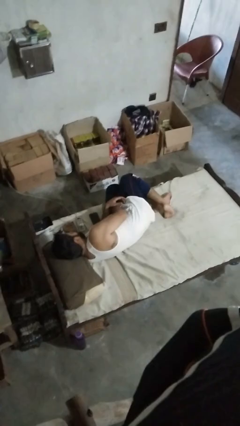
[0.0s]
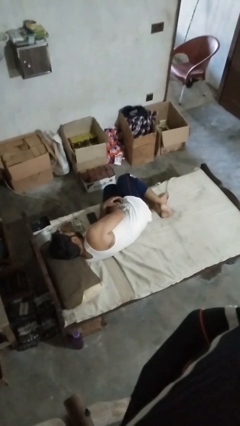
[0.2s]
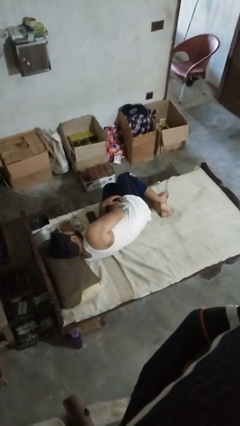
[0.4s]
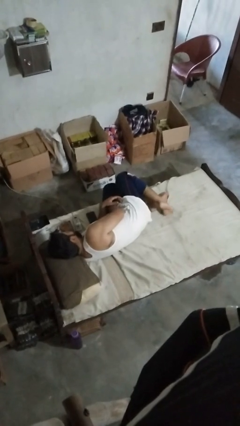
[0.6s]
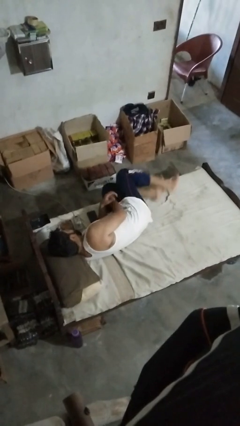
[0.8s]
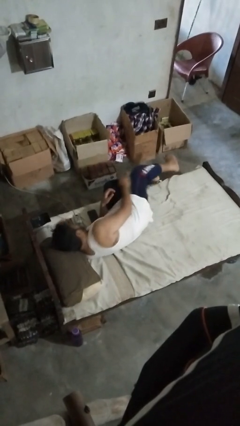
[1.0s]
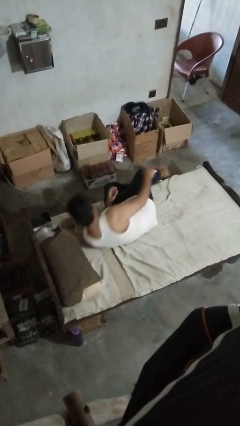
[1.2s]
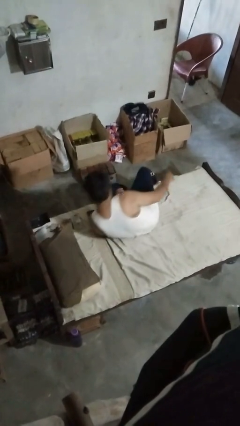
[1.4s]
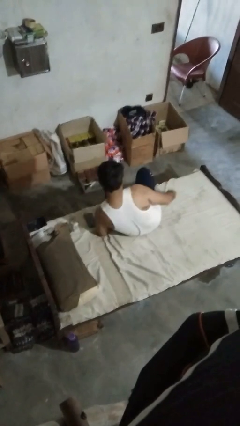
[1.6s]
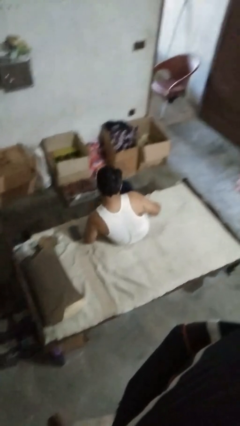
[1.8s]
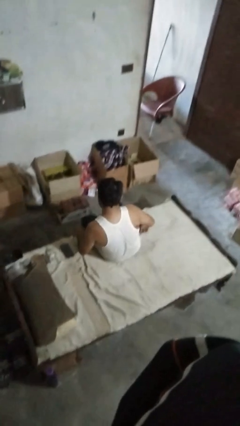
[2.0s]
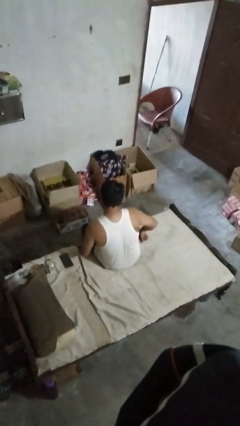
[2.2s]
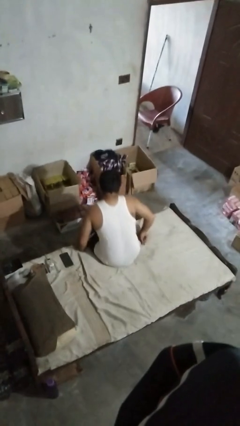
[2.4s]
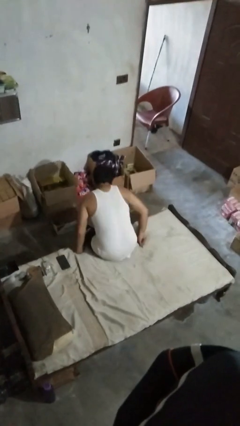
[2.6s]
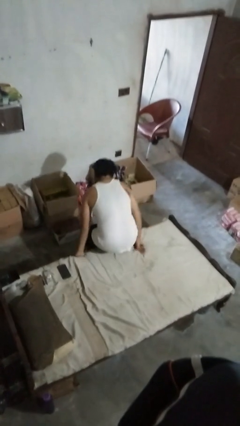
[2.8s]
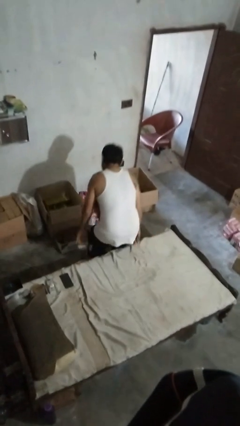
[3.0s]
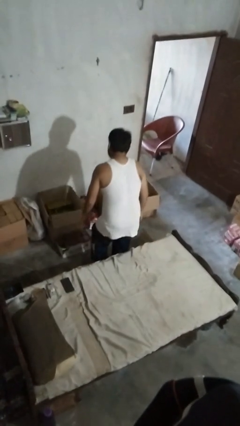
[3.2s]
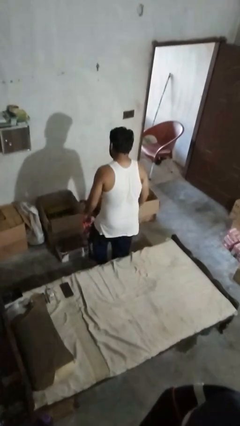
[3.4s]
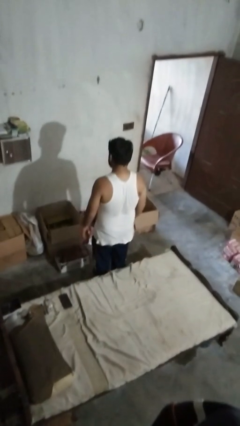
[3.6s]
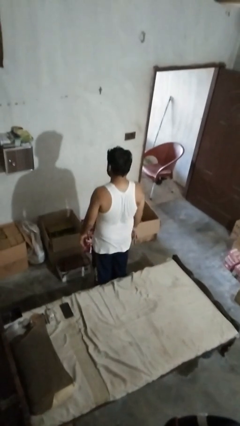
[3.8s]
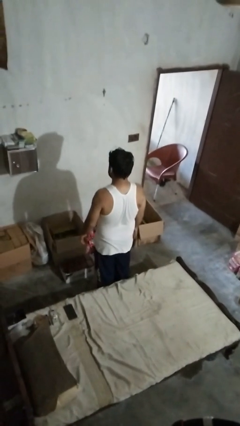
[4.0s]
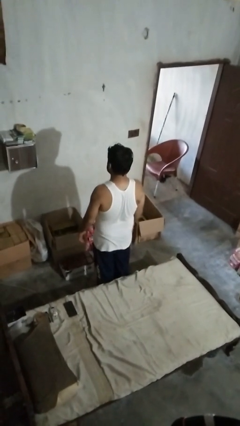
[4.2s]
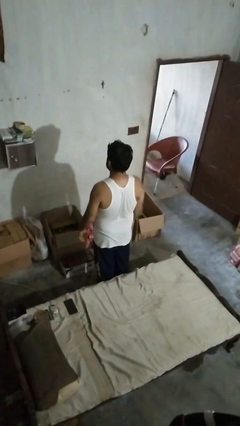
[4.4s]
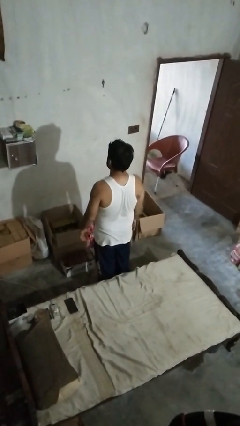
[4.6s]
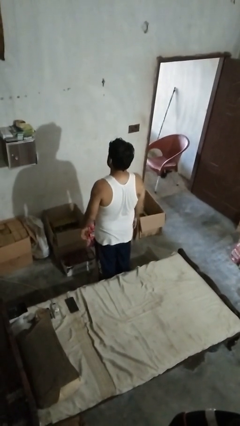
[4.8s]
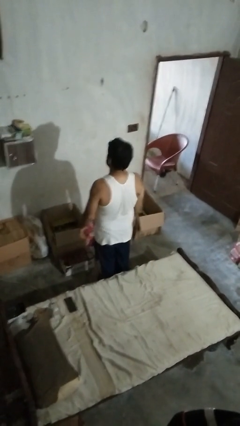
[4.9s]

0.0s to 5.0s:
person stands up

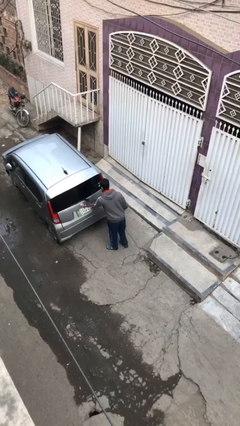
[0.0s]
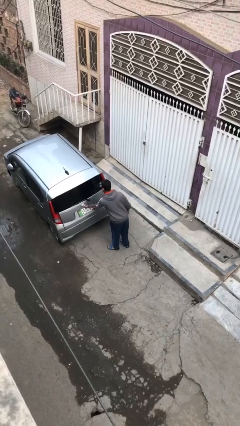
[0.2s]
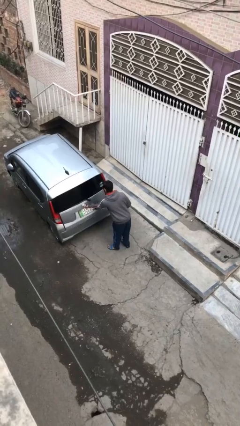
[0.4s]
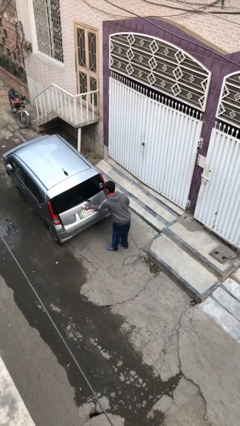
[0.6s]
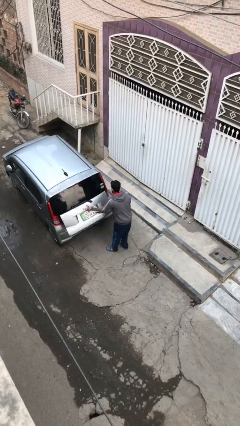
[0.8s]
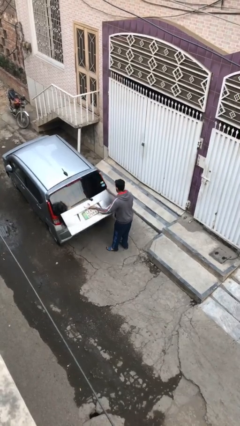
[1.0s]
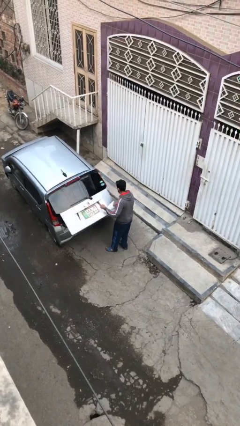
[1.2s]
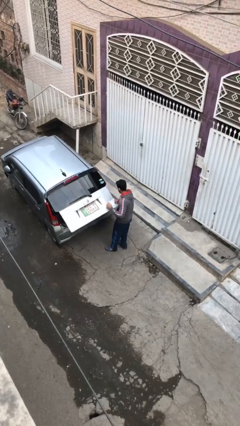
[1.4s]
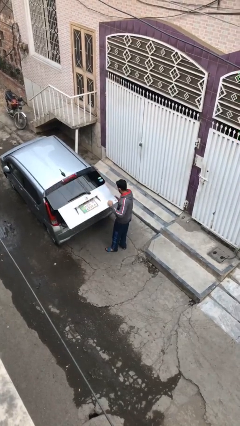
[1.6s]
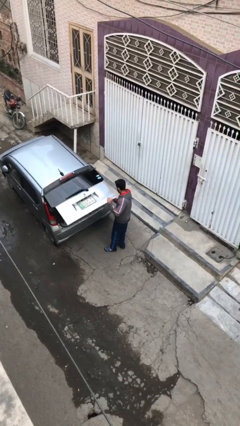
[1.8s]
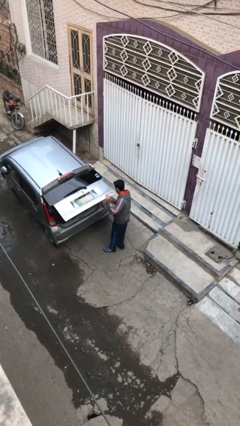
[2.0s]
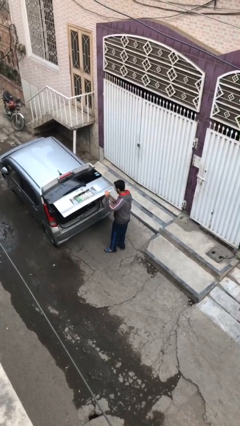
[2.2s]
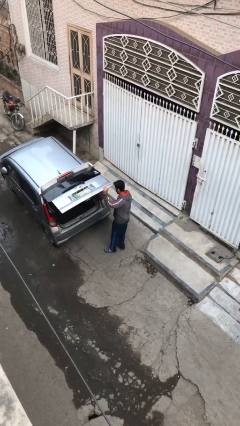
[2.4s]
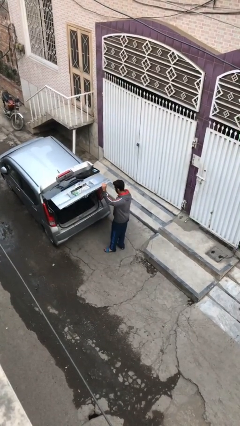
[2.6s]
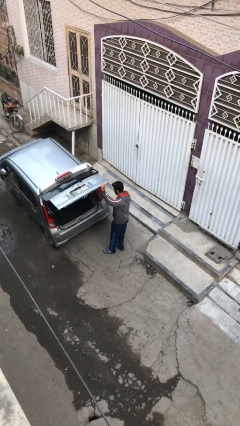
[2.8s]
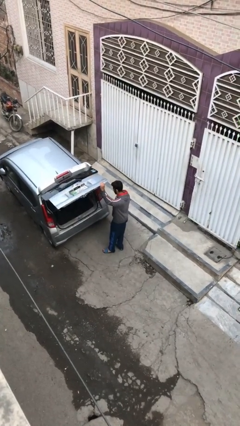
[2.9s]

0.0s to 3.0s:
person opens car trunk

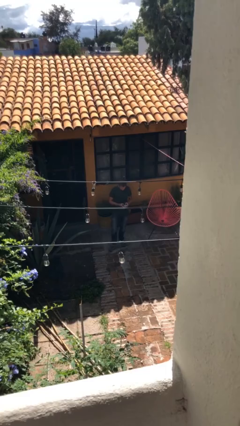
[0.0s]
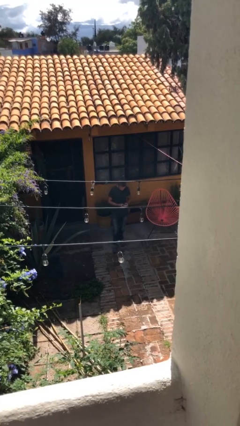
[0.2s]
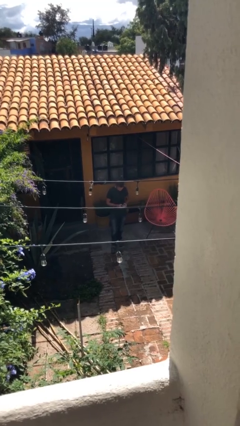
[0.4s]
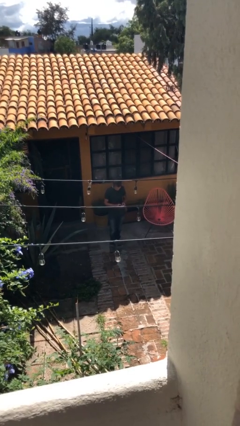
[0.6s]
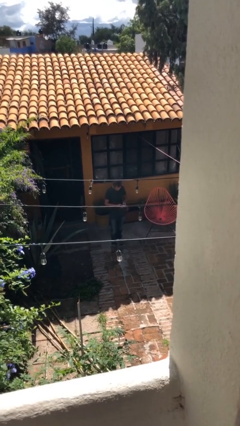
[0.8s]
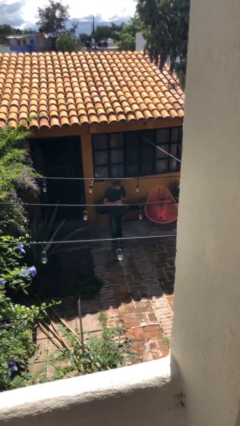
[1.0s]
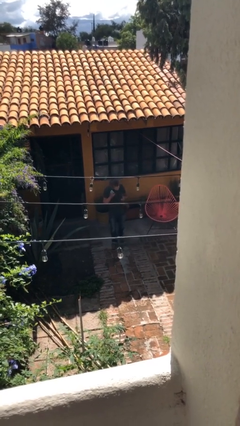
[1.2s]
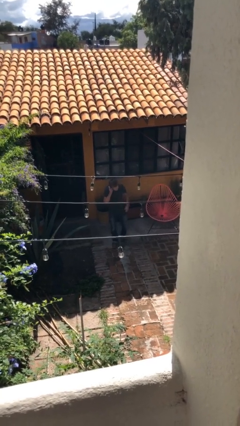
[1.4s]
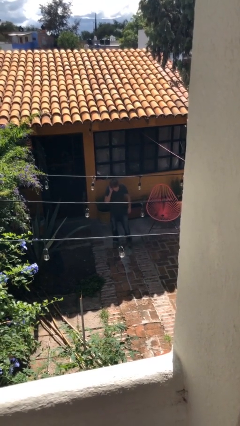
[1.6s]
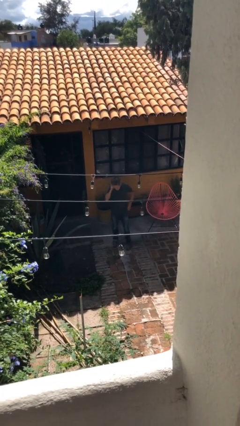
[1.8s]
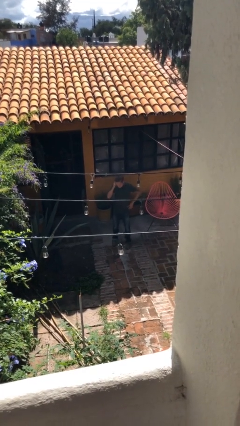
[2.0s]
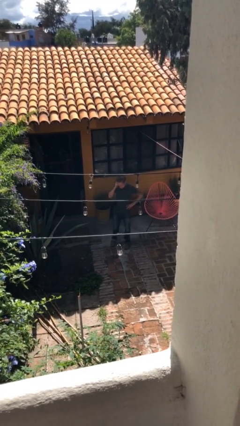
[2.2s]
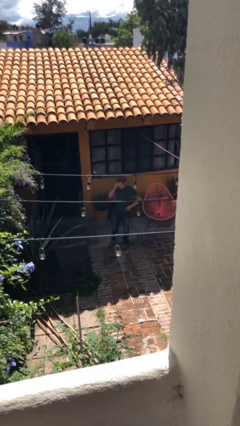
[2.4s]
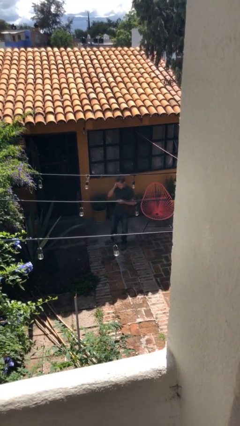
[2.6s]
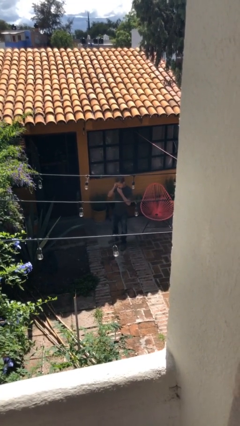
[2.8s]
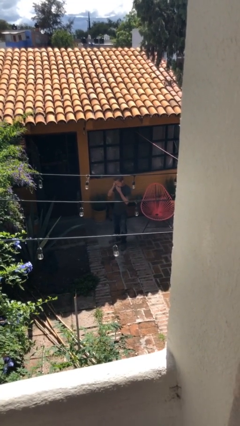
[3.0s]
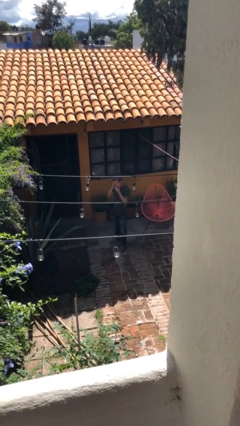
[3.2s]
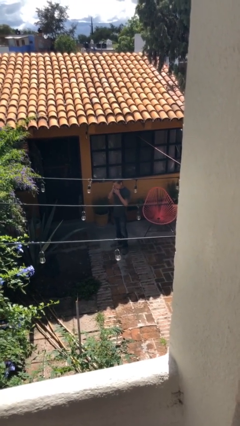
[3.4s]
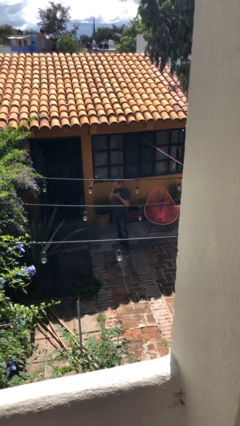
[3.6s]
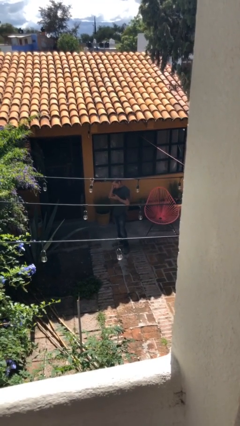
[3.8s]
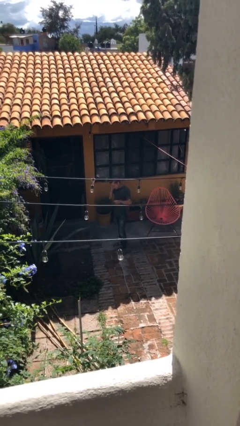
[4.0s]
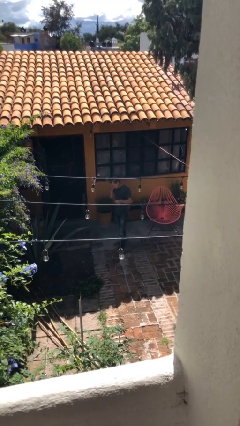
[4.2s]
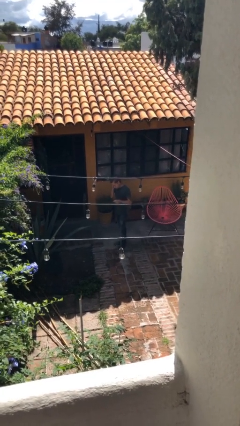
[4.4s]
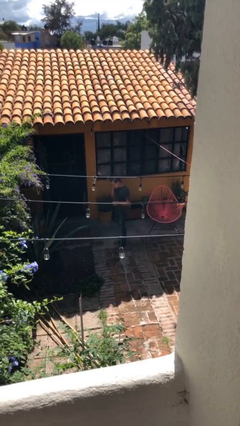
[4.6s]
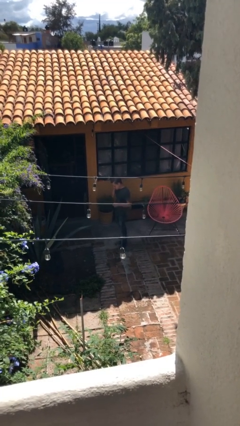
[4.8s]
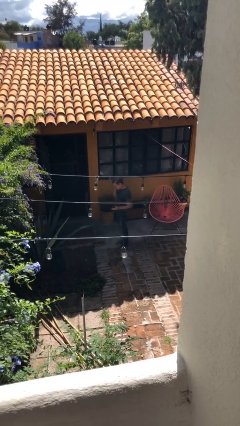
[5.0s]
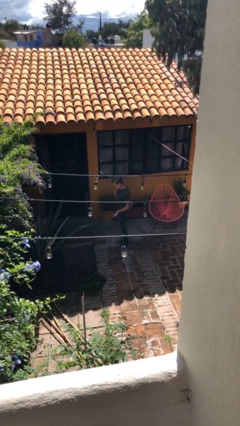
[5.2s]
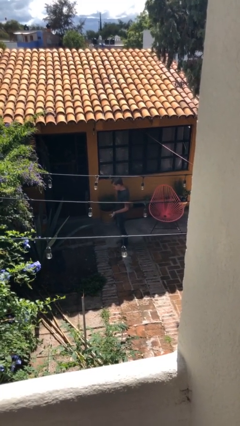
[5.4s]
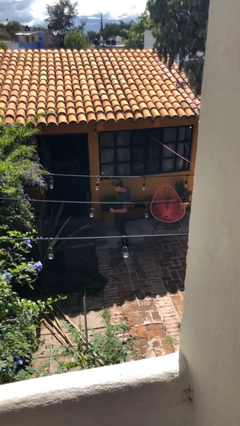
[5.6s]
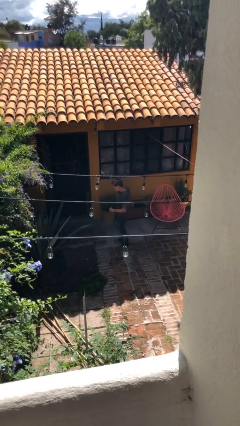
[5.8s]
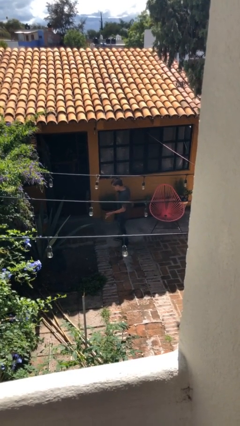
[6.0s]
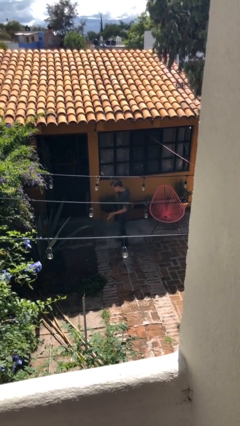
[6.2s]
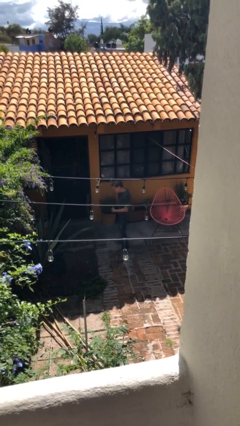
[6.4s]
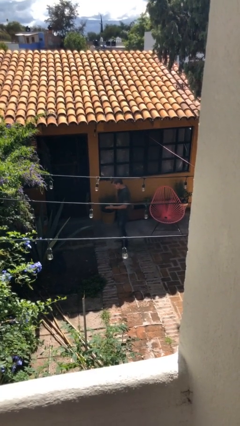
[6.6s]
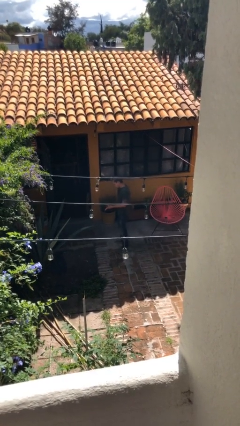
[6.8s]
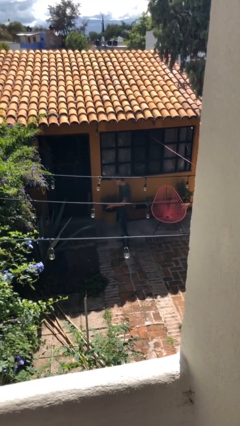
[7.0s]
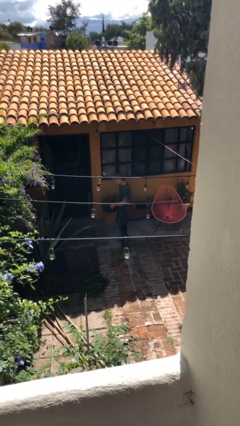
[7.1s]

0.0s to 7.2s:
person talks on phone

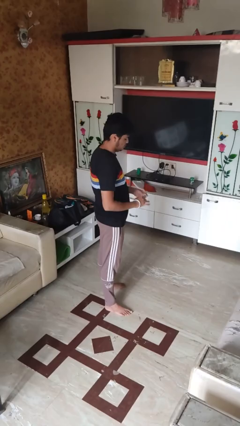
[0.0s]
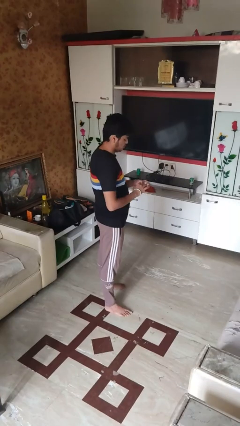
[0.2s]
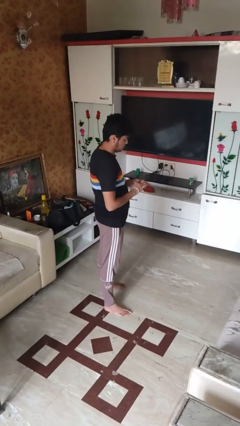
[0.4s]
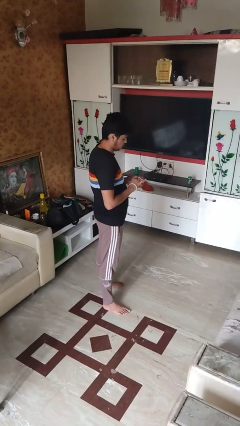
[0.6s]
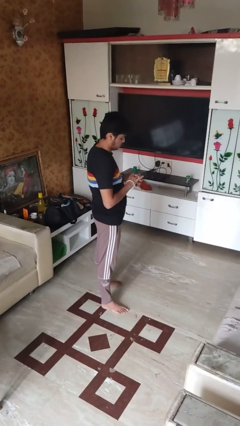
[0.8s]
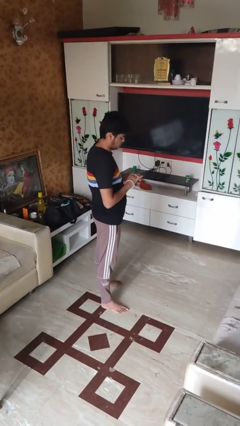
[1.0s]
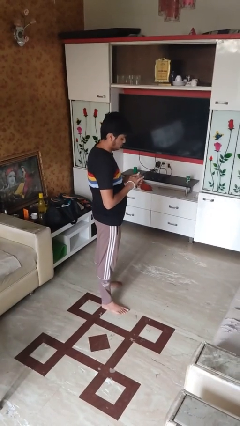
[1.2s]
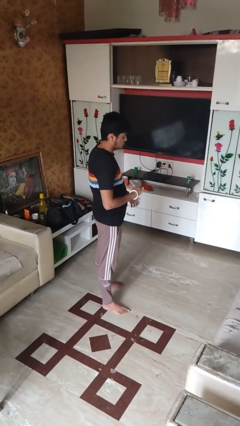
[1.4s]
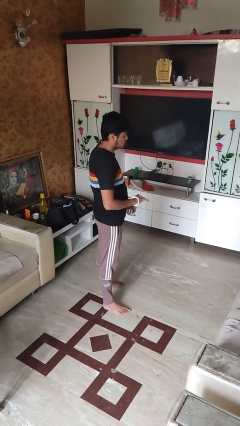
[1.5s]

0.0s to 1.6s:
person puts on ring

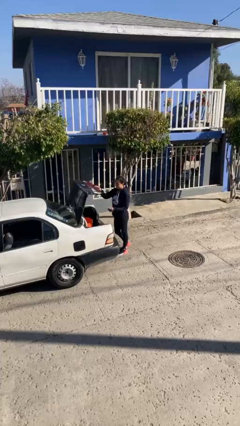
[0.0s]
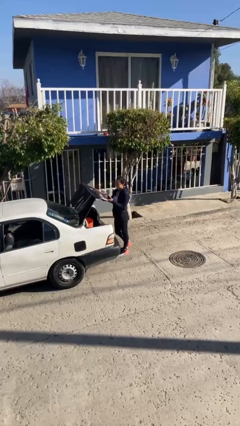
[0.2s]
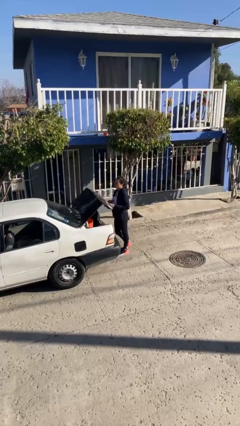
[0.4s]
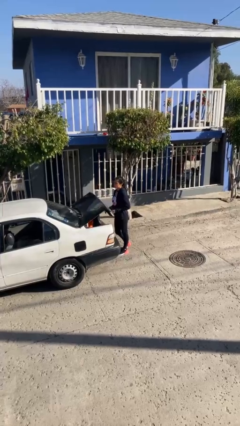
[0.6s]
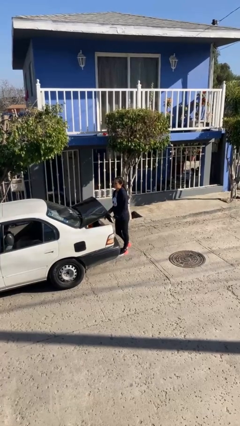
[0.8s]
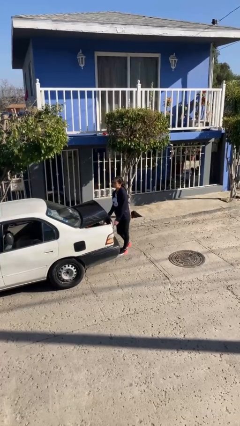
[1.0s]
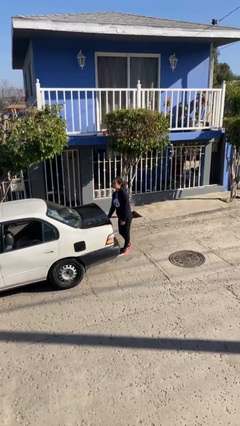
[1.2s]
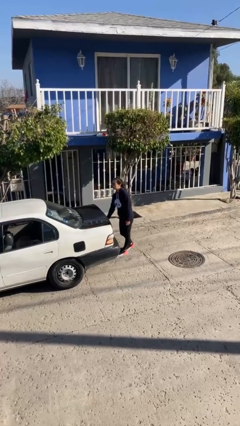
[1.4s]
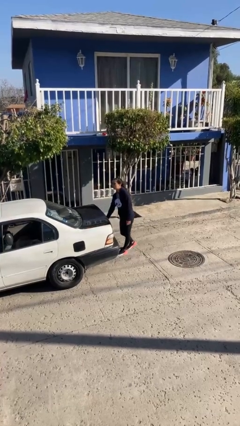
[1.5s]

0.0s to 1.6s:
person closes car trunk
